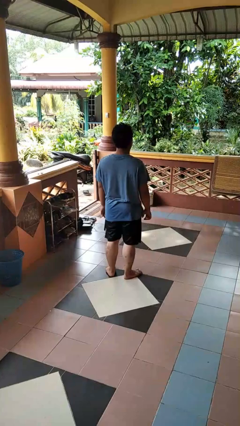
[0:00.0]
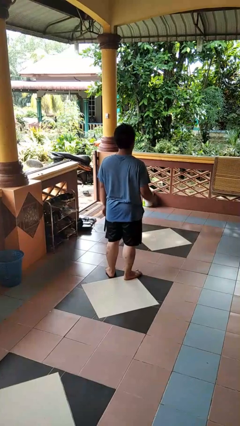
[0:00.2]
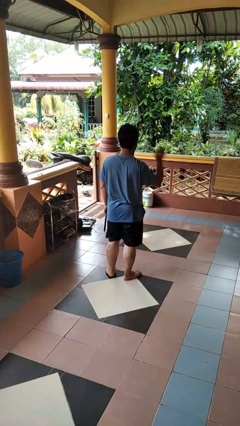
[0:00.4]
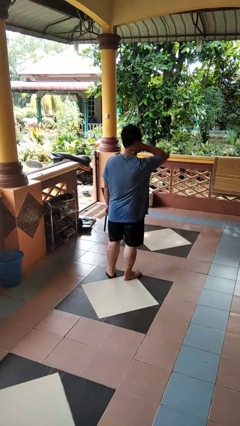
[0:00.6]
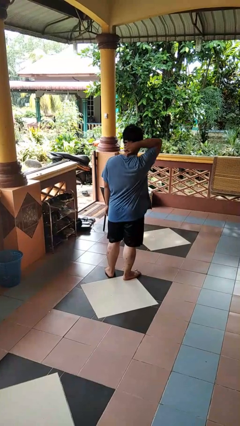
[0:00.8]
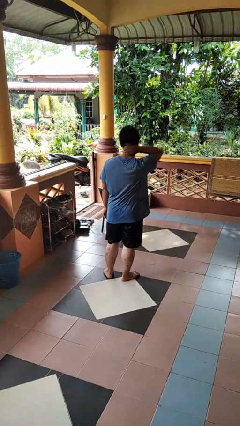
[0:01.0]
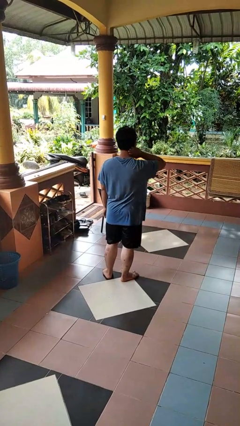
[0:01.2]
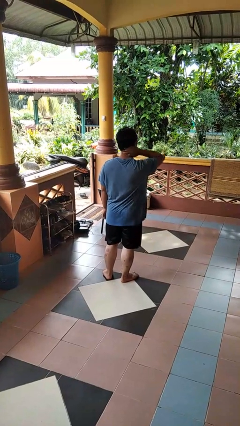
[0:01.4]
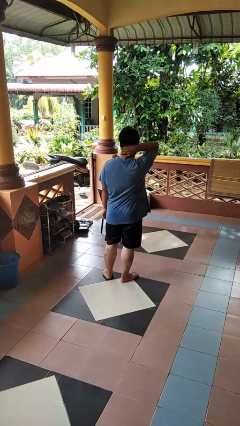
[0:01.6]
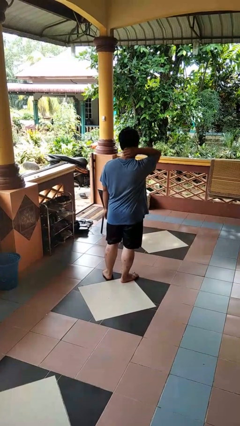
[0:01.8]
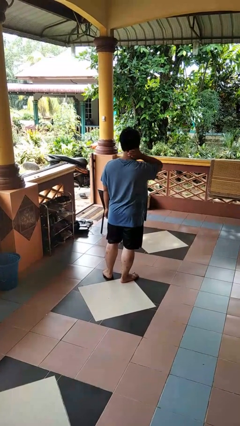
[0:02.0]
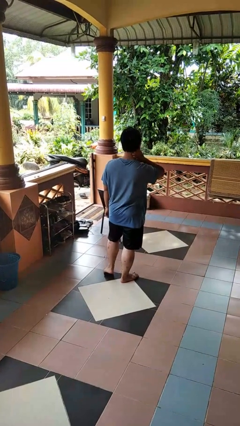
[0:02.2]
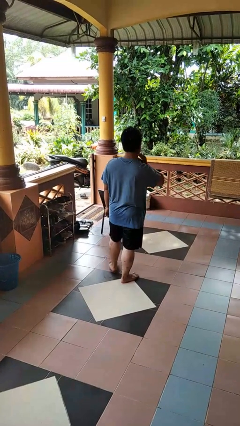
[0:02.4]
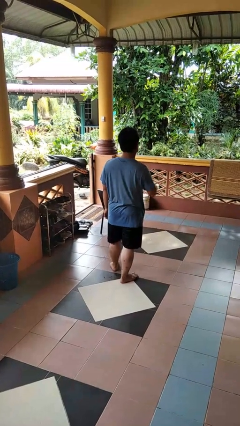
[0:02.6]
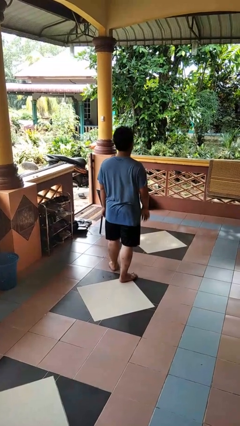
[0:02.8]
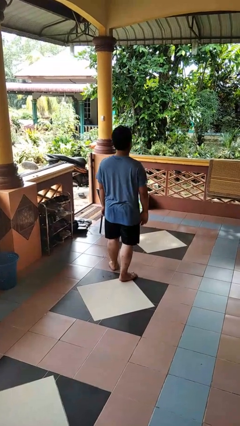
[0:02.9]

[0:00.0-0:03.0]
person rubs neck

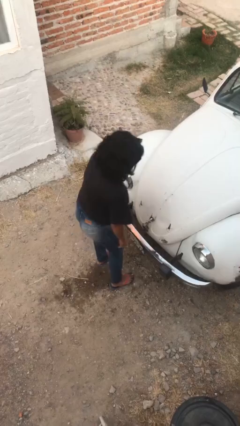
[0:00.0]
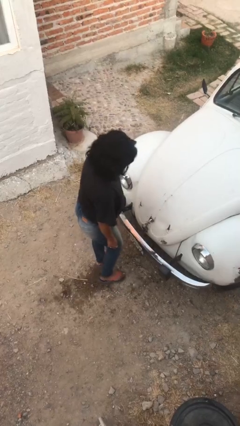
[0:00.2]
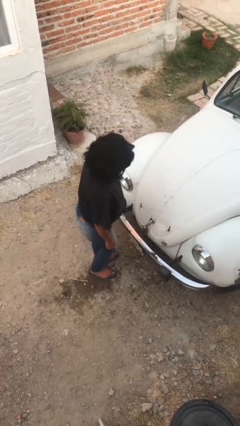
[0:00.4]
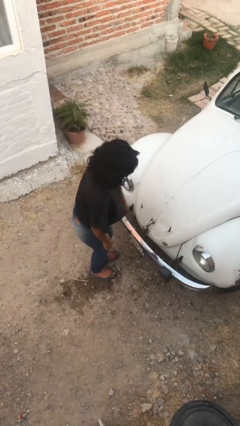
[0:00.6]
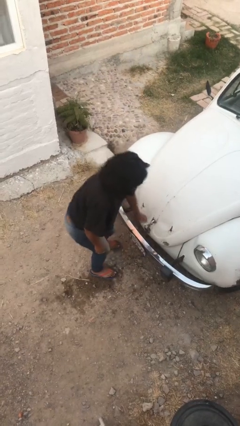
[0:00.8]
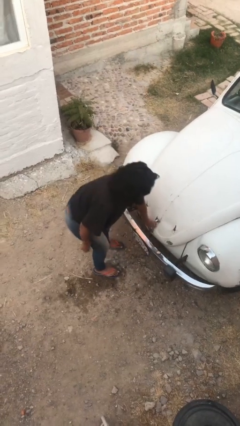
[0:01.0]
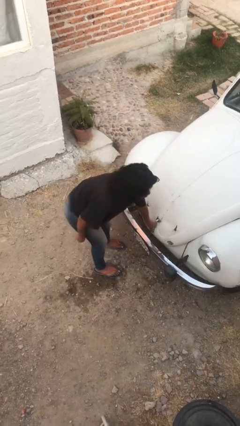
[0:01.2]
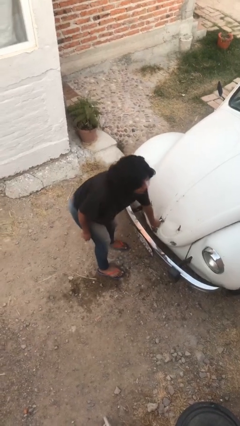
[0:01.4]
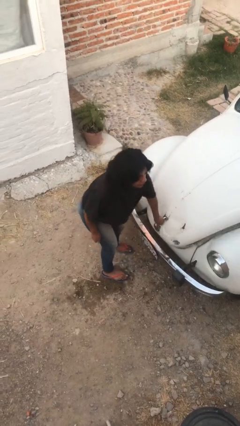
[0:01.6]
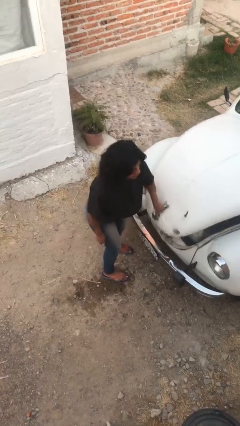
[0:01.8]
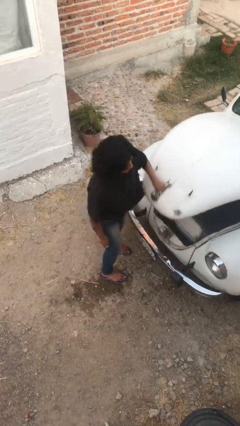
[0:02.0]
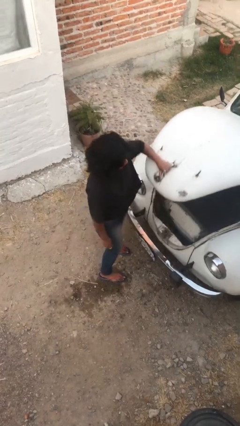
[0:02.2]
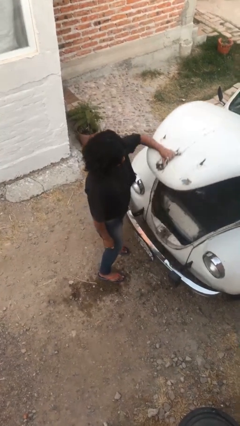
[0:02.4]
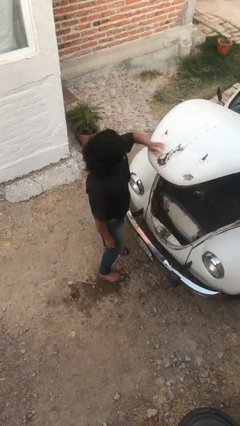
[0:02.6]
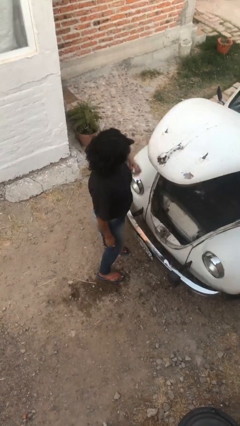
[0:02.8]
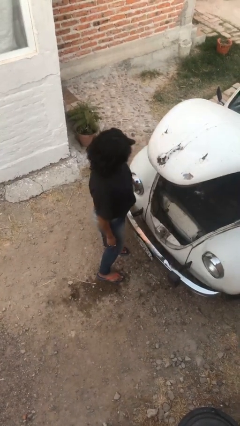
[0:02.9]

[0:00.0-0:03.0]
person opens car trunk

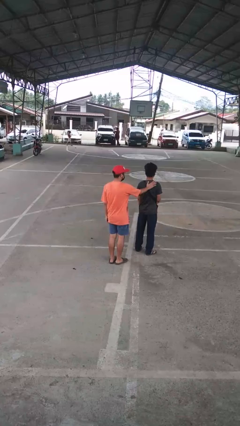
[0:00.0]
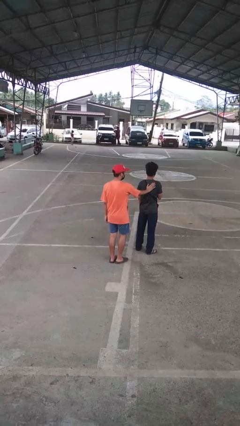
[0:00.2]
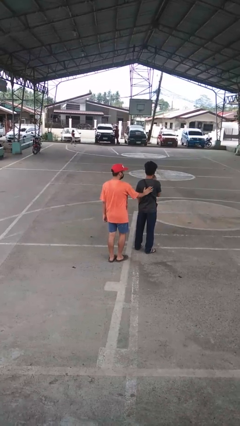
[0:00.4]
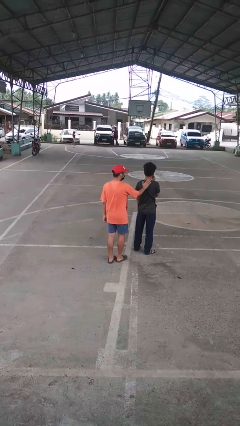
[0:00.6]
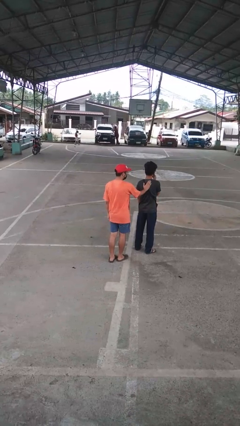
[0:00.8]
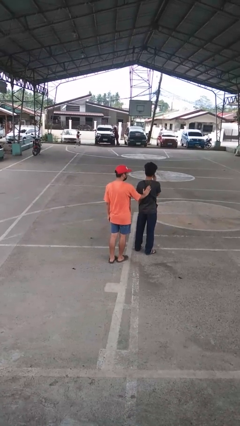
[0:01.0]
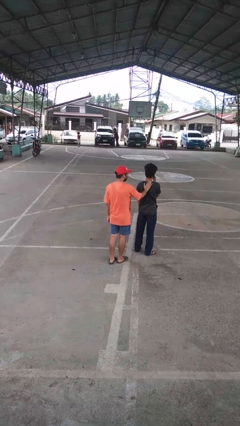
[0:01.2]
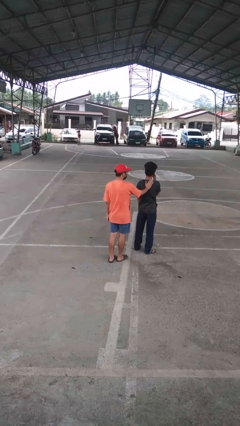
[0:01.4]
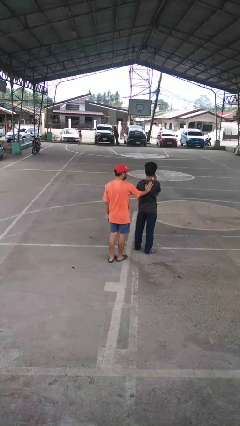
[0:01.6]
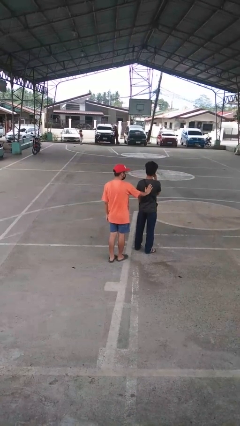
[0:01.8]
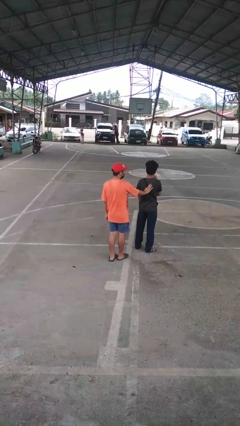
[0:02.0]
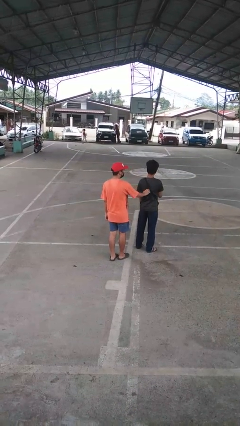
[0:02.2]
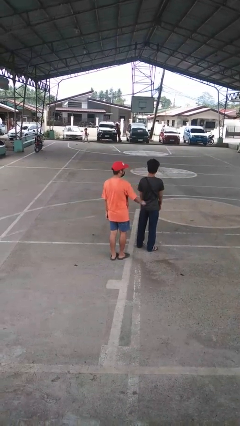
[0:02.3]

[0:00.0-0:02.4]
person touches back of person

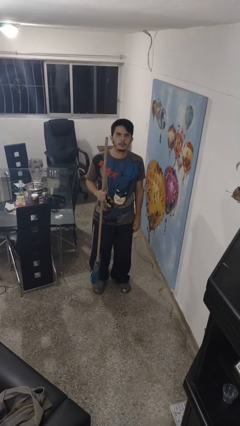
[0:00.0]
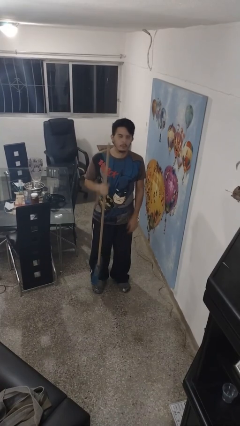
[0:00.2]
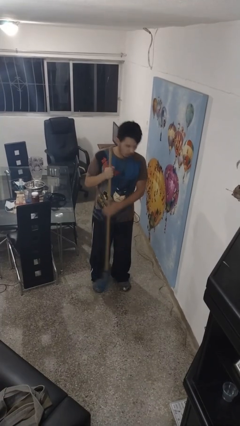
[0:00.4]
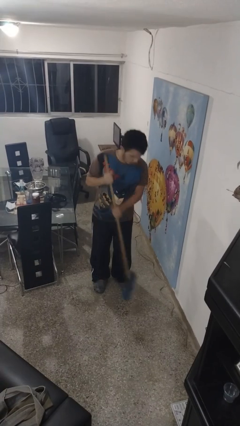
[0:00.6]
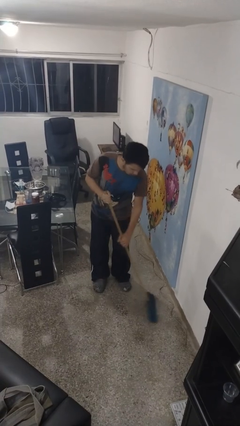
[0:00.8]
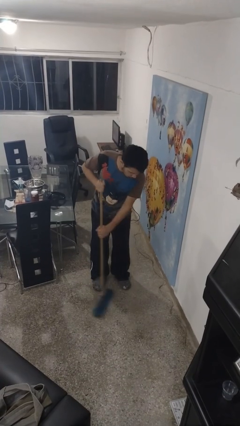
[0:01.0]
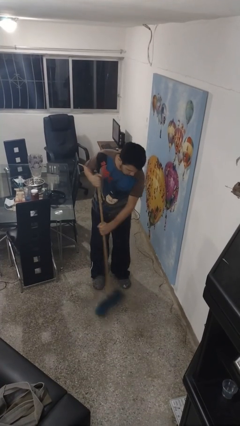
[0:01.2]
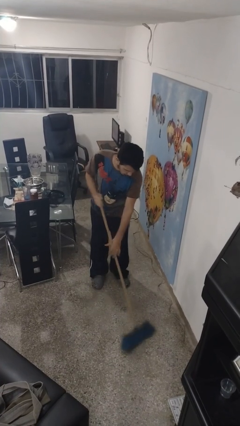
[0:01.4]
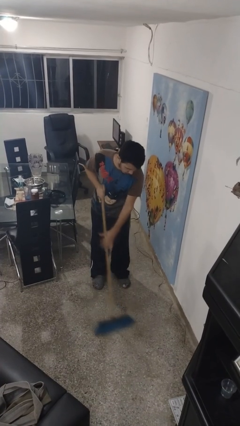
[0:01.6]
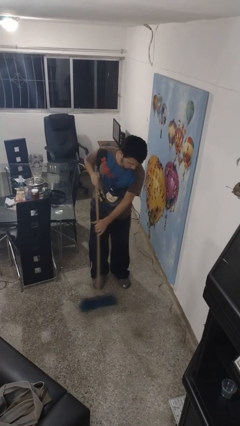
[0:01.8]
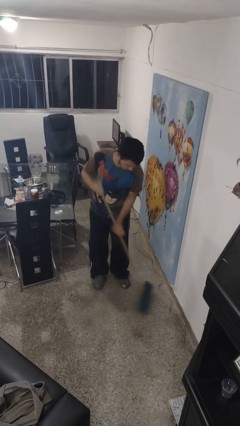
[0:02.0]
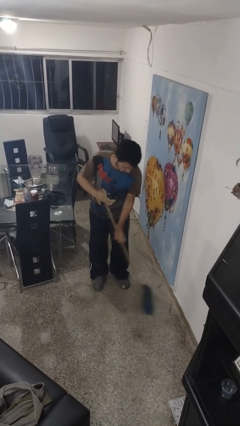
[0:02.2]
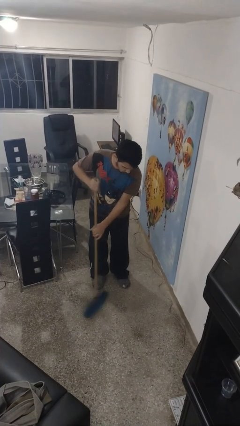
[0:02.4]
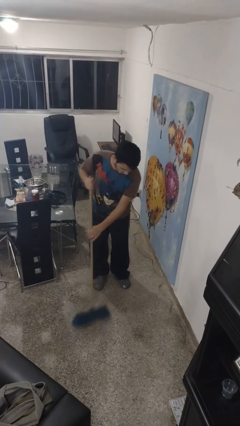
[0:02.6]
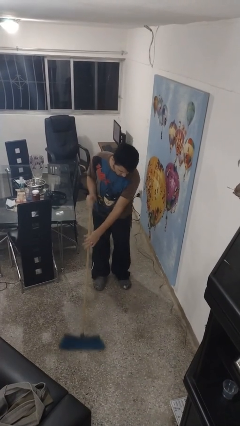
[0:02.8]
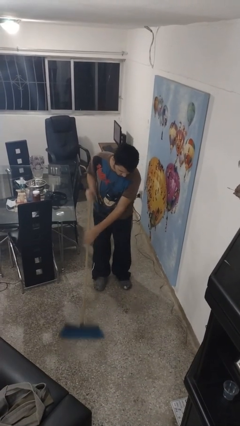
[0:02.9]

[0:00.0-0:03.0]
person sweeps floor

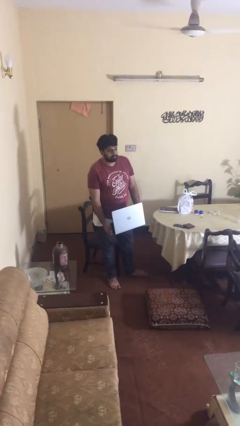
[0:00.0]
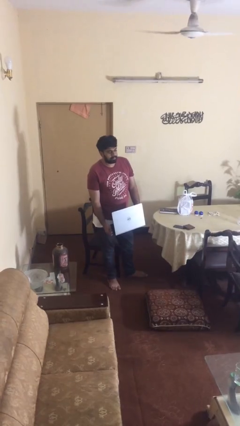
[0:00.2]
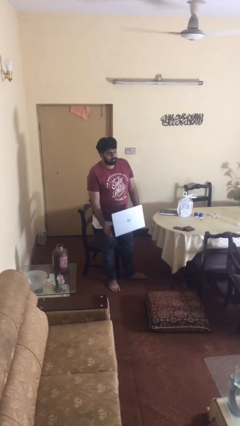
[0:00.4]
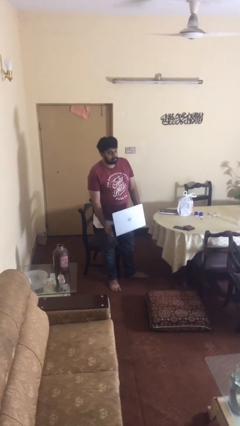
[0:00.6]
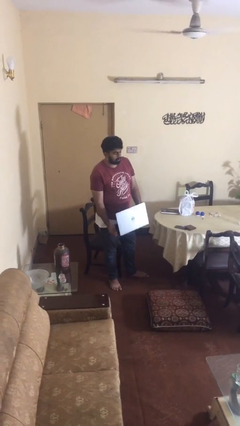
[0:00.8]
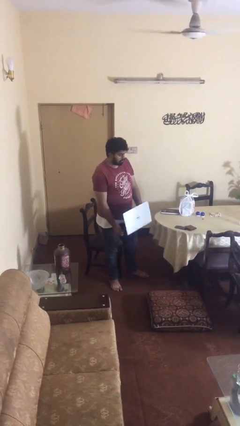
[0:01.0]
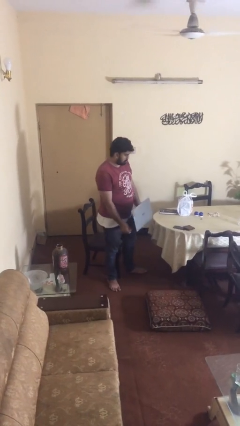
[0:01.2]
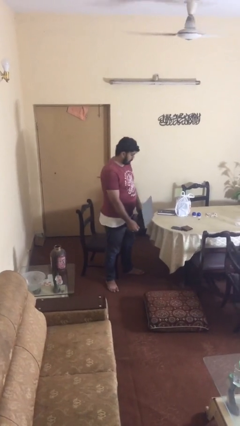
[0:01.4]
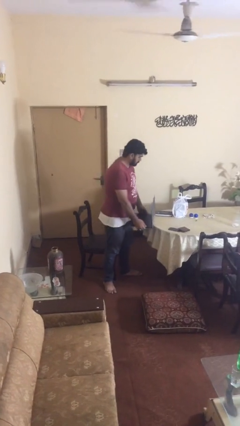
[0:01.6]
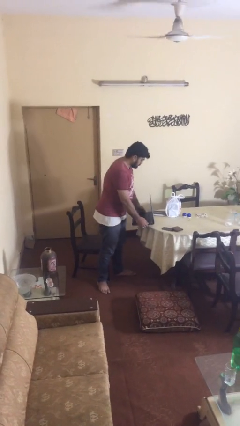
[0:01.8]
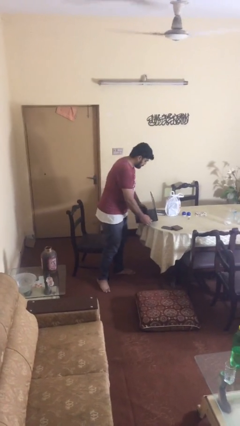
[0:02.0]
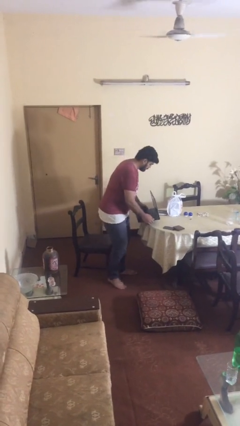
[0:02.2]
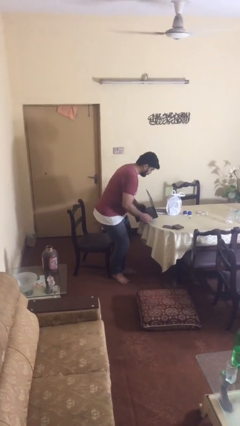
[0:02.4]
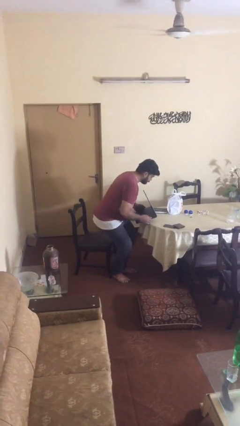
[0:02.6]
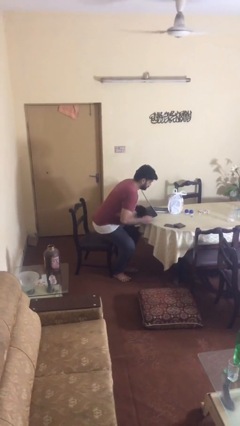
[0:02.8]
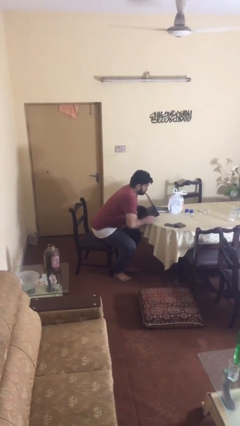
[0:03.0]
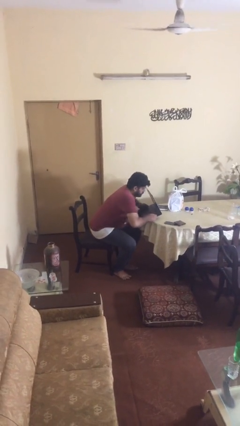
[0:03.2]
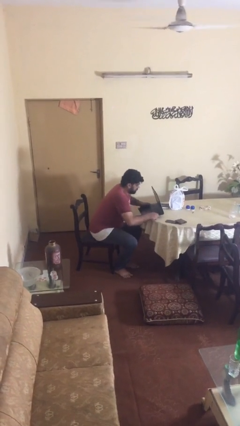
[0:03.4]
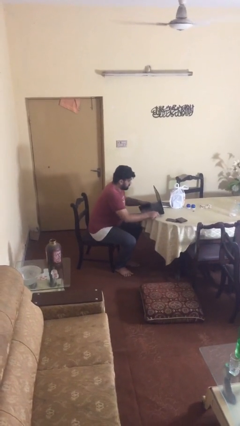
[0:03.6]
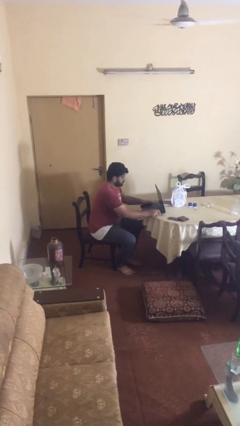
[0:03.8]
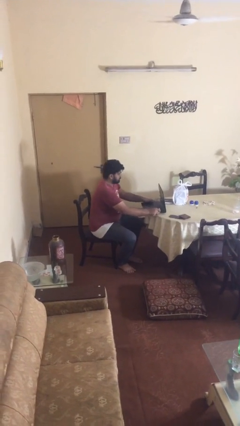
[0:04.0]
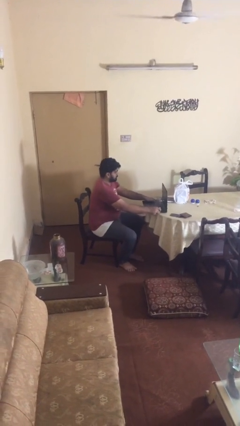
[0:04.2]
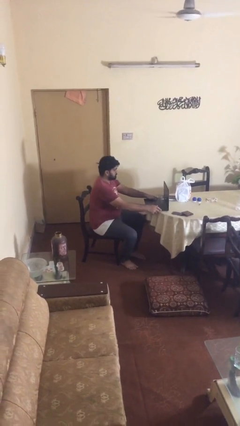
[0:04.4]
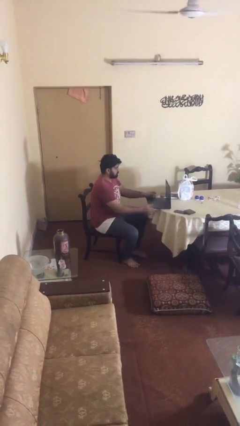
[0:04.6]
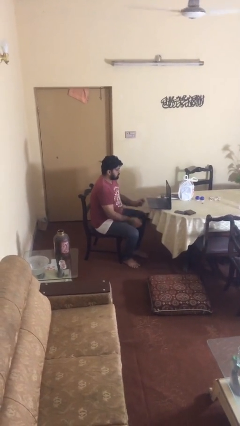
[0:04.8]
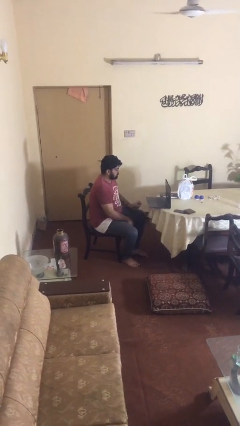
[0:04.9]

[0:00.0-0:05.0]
person sits down

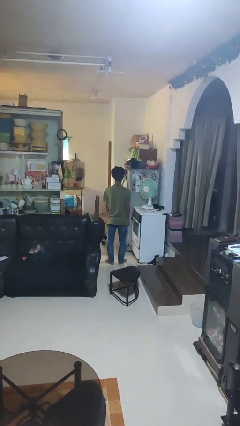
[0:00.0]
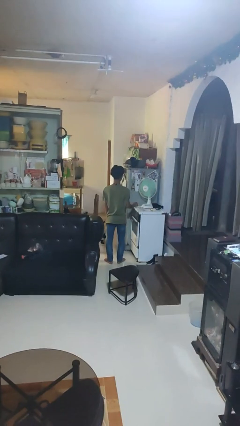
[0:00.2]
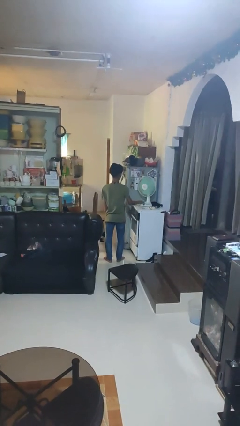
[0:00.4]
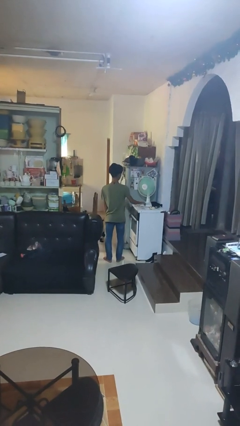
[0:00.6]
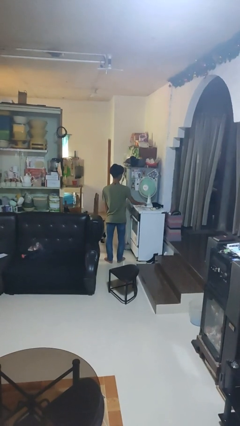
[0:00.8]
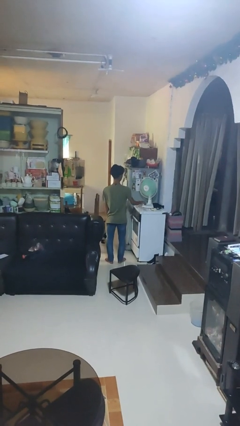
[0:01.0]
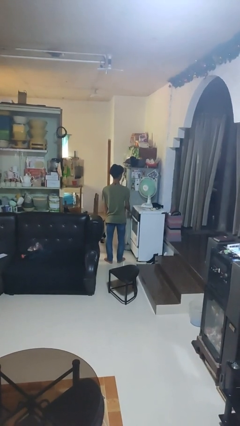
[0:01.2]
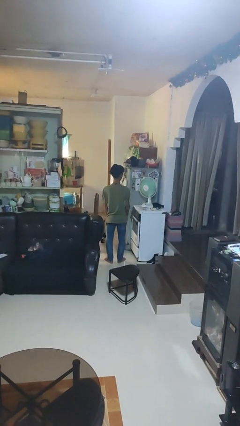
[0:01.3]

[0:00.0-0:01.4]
person turns off fan
